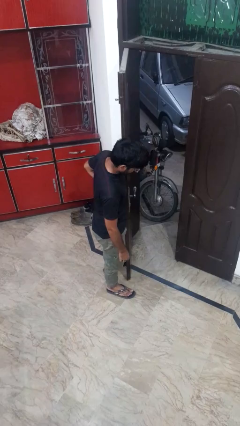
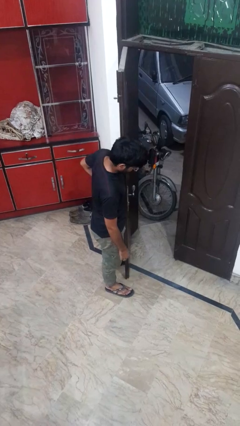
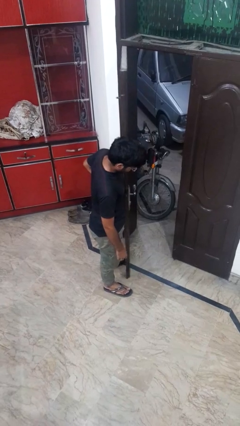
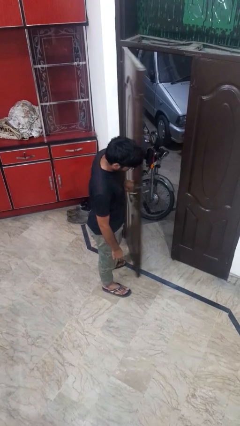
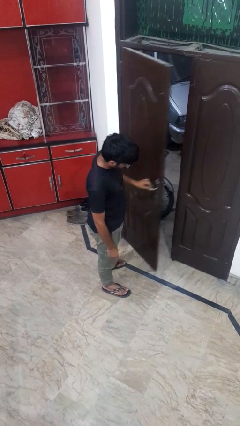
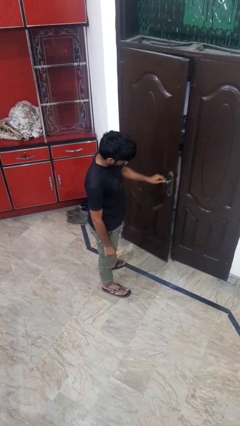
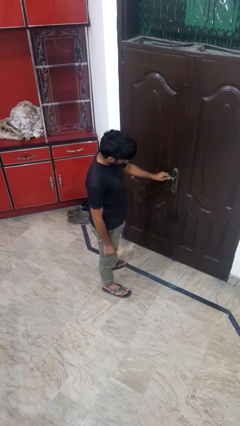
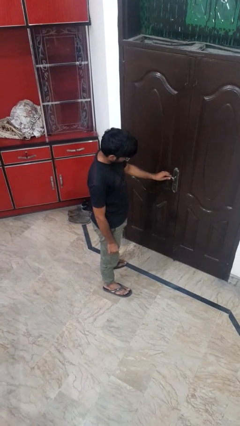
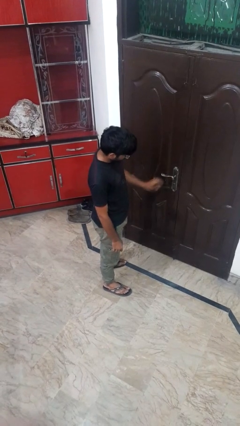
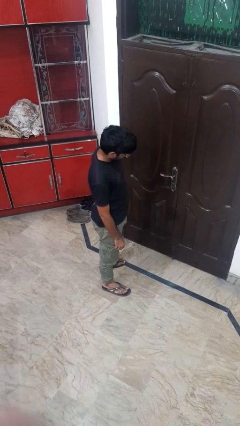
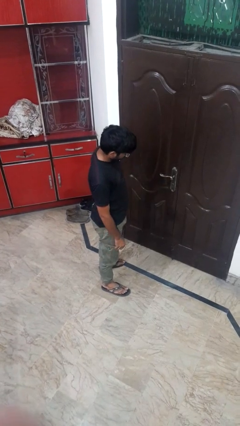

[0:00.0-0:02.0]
person closes facility door

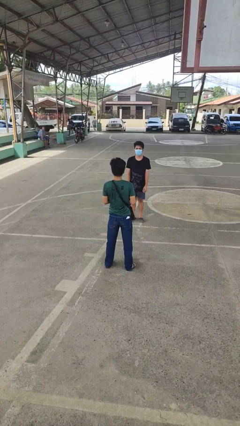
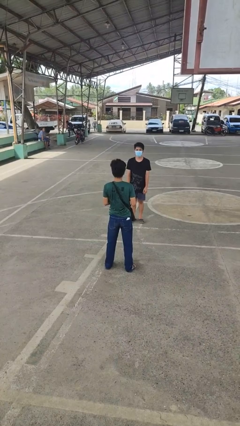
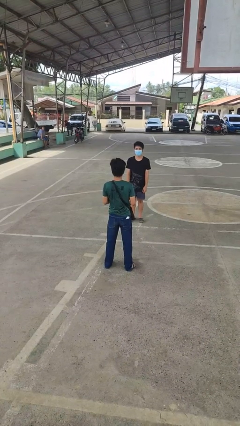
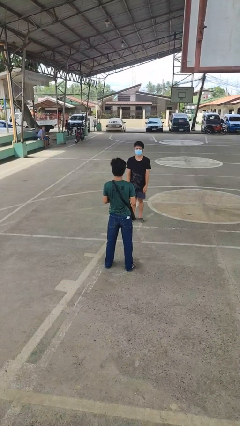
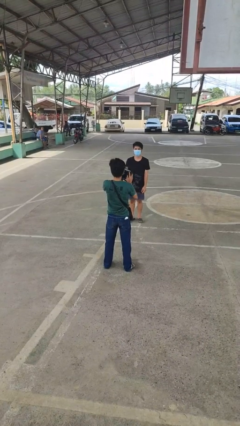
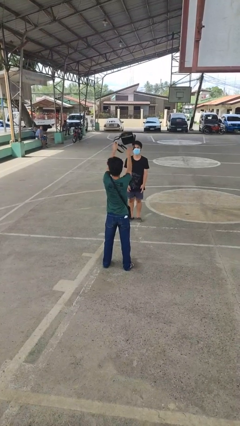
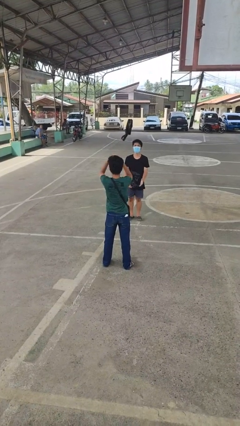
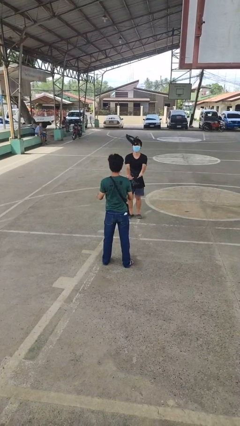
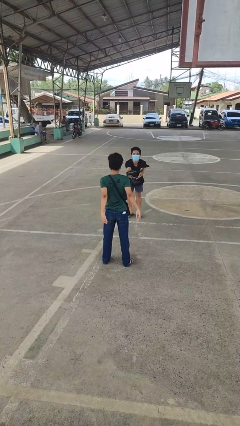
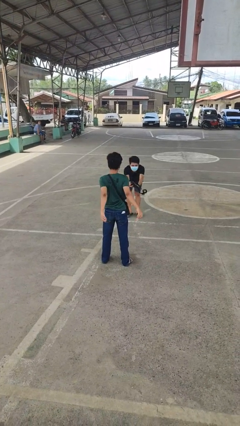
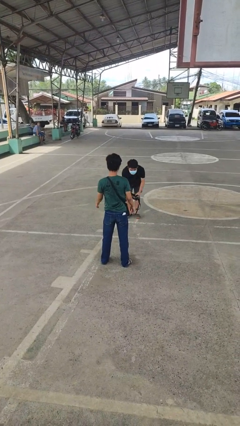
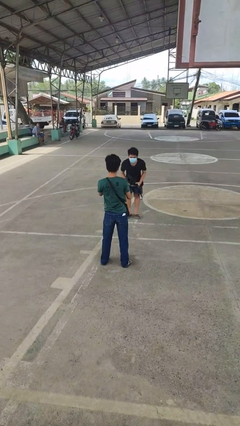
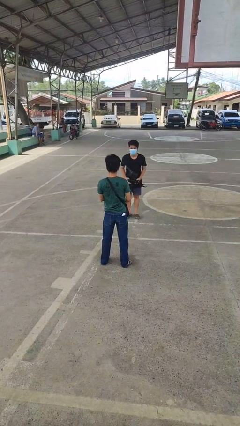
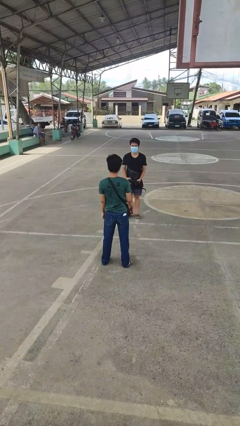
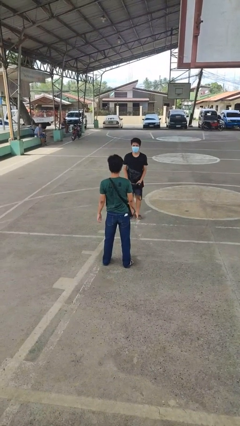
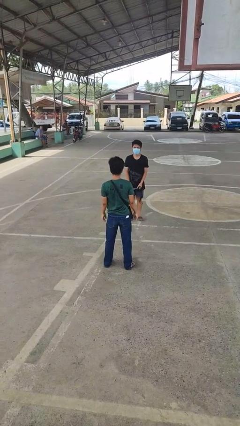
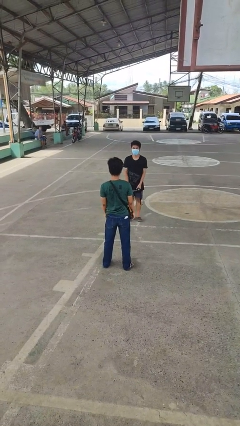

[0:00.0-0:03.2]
person throws object to person

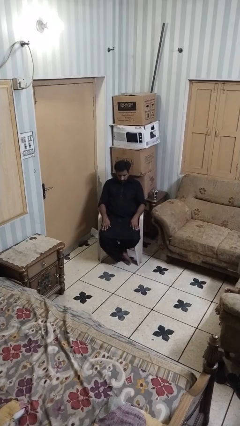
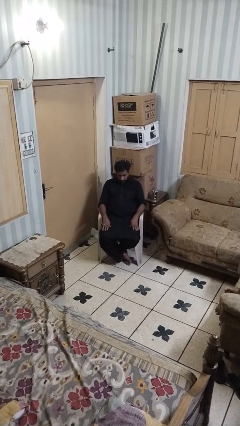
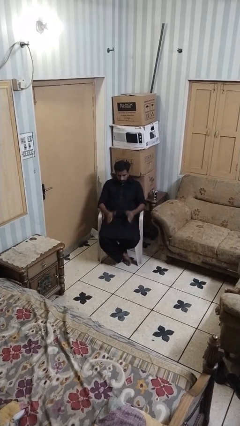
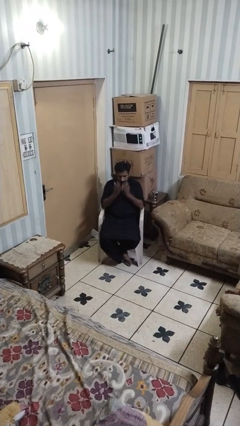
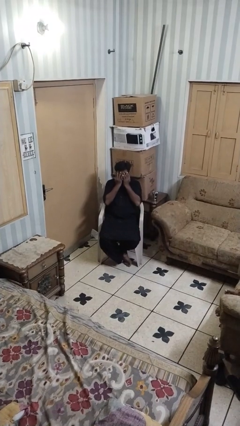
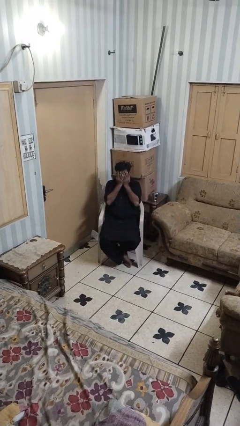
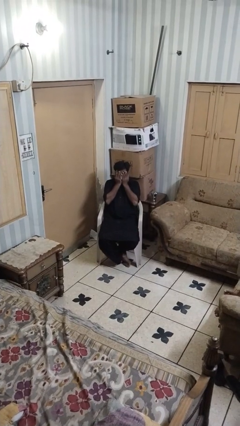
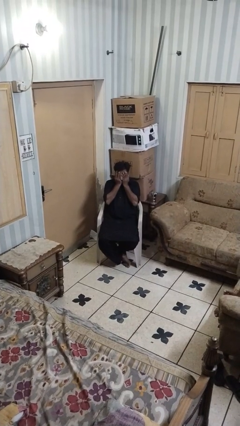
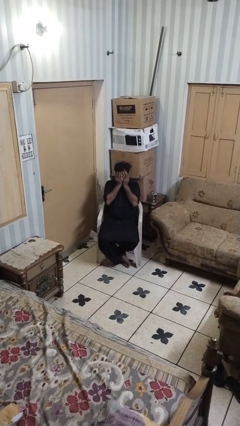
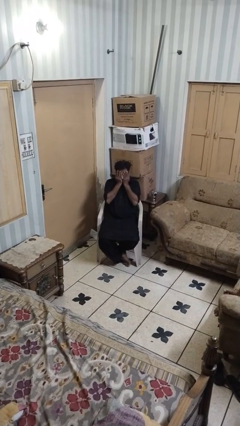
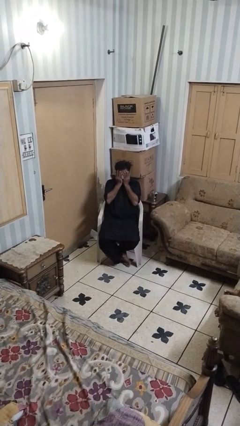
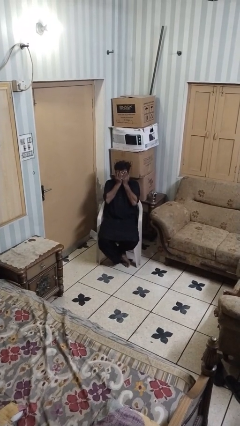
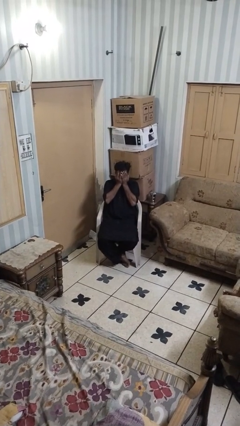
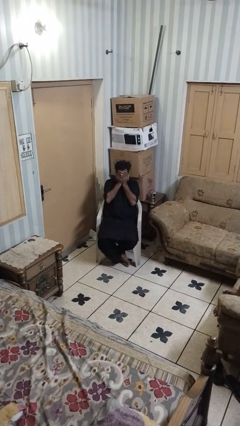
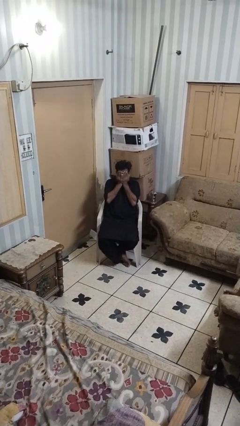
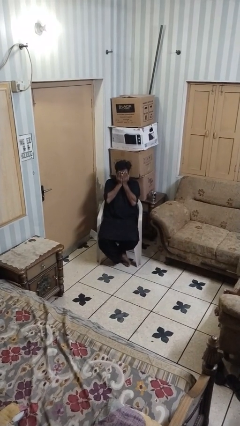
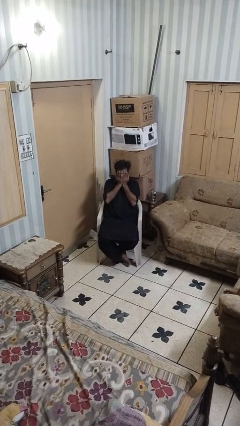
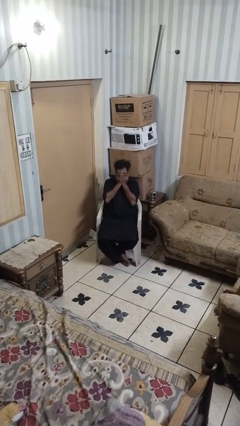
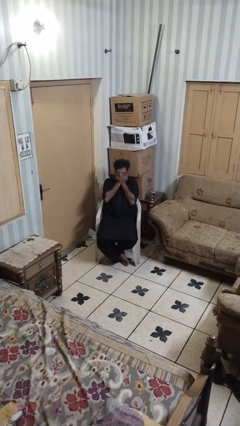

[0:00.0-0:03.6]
person covers face with hands

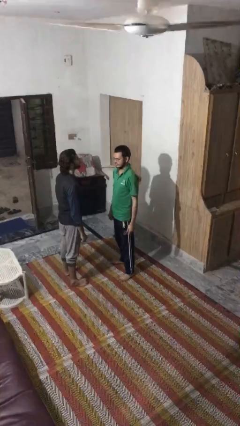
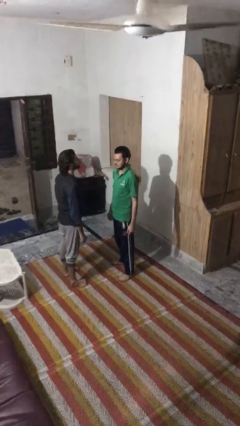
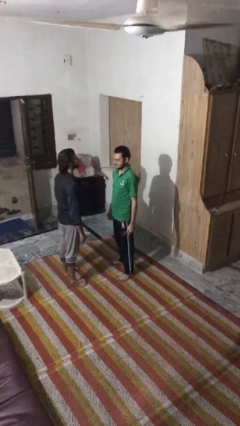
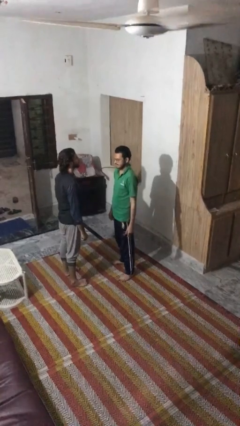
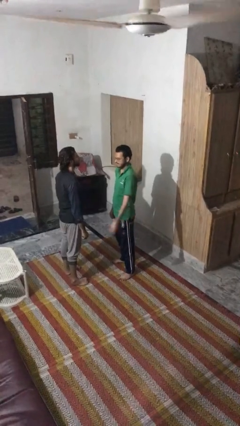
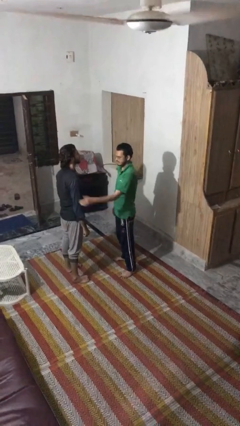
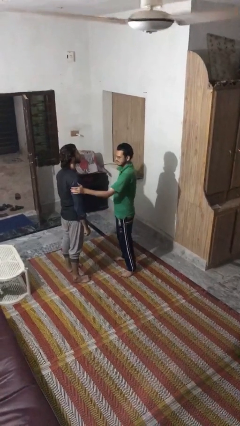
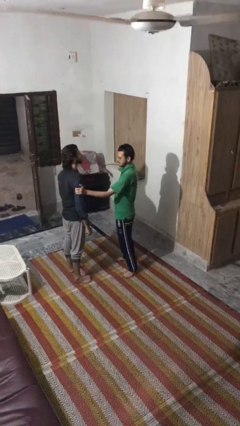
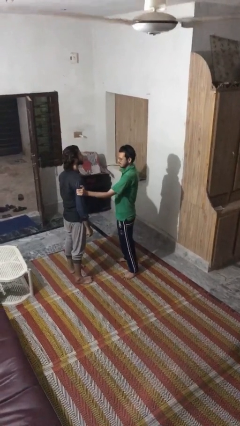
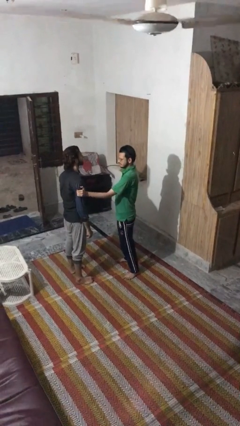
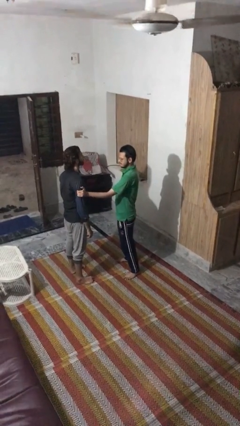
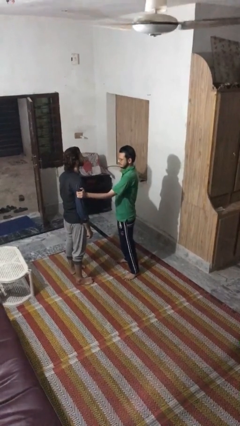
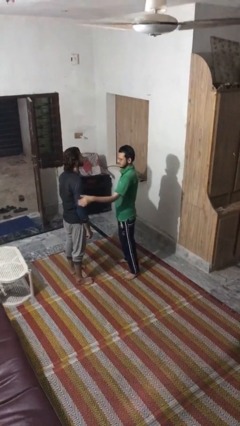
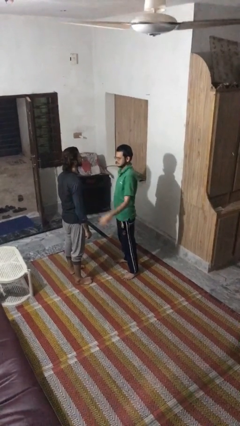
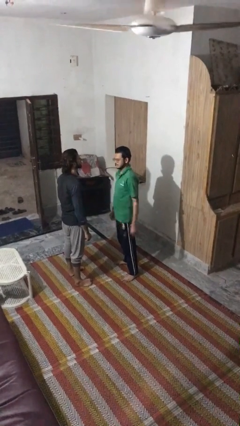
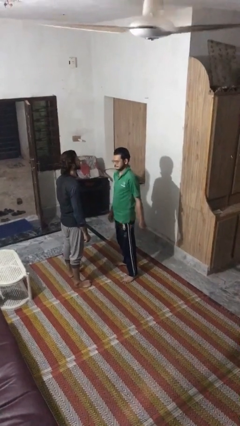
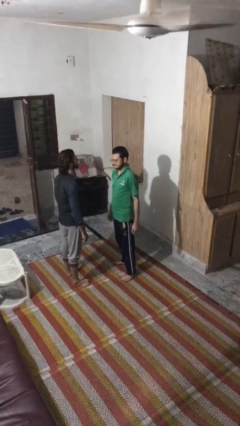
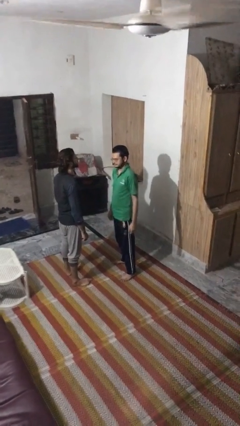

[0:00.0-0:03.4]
person grabs person by bicep

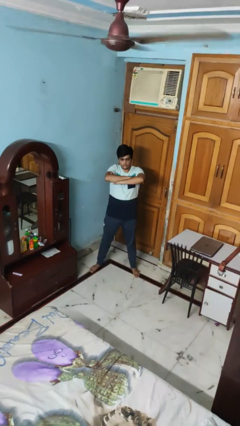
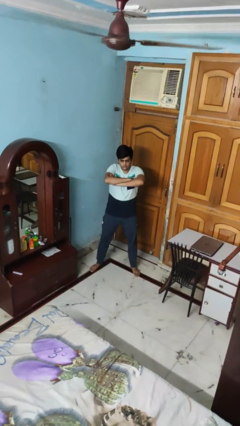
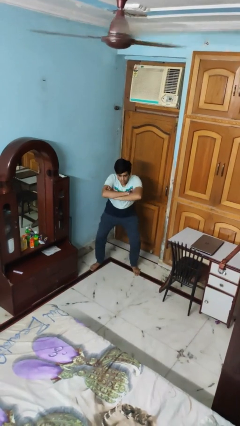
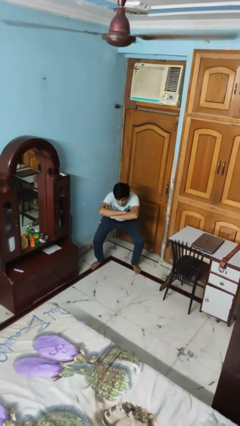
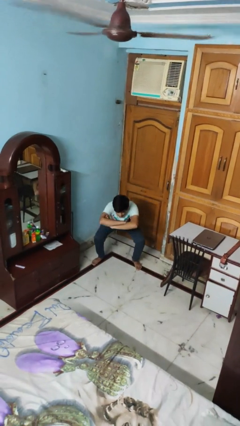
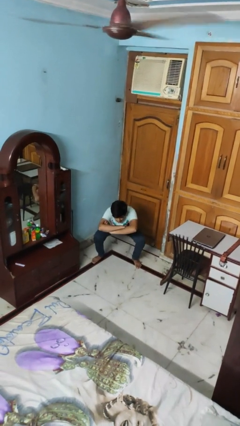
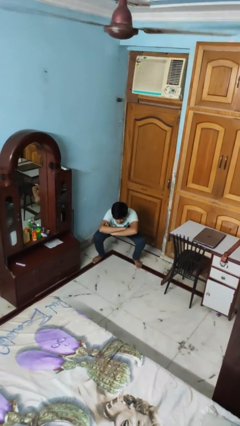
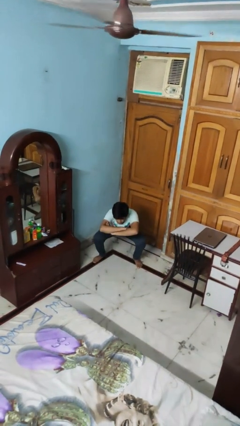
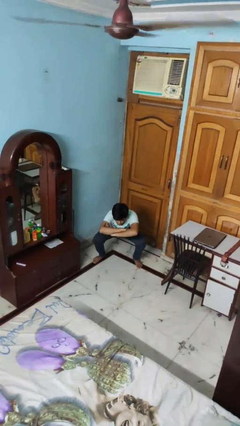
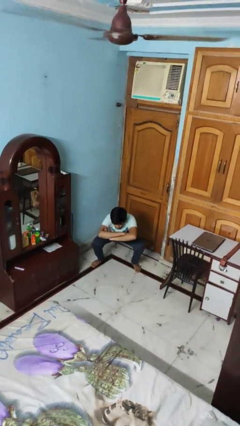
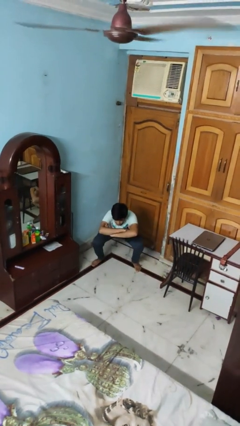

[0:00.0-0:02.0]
person squats

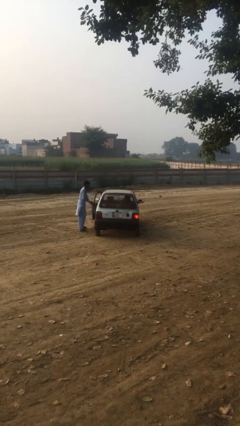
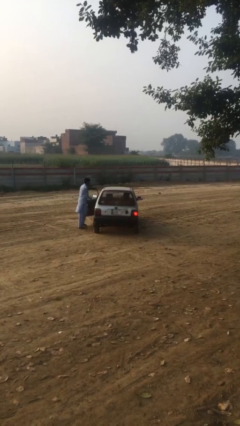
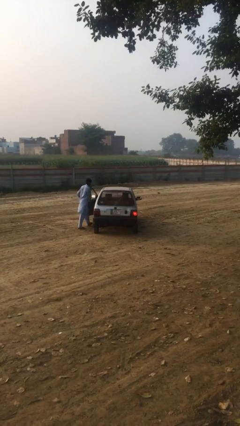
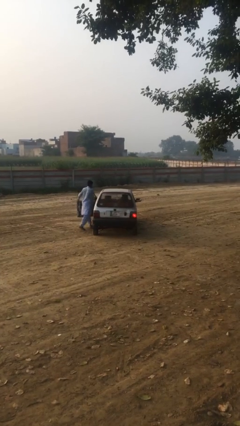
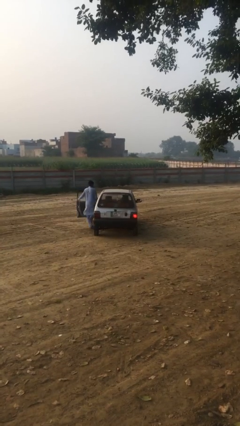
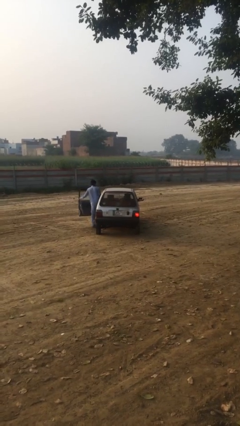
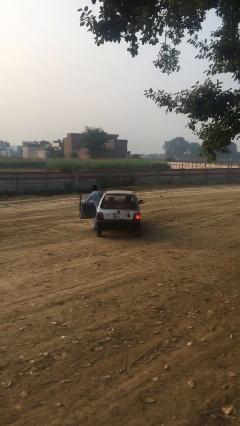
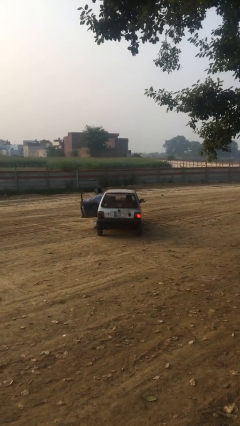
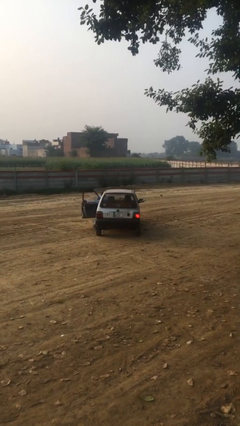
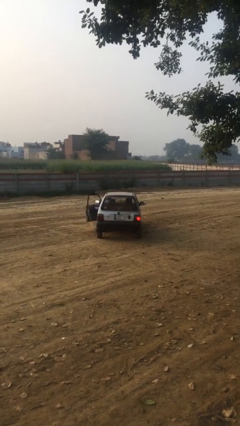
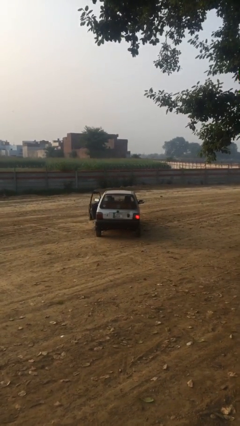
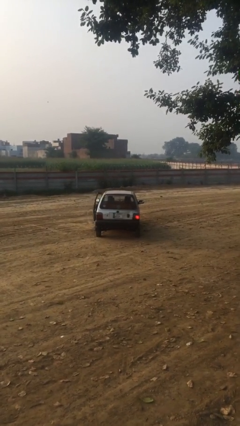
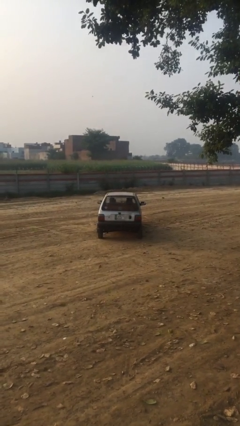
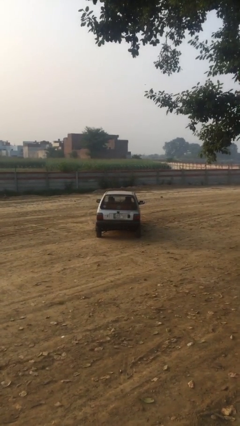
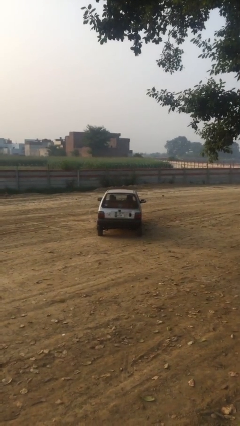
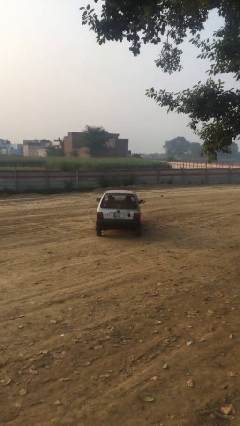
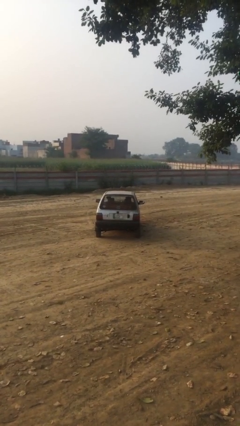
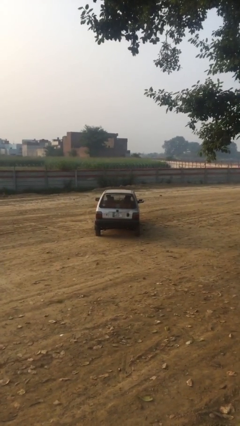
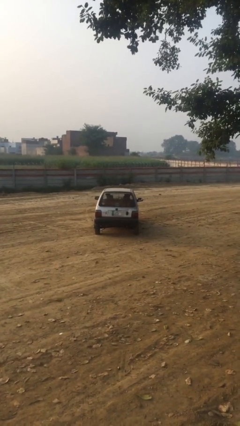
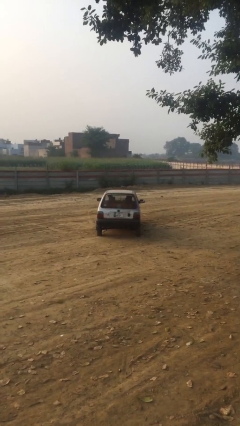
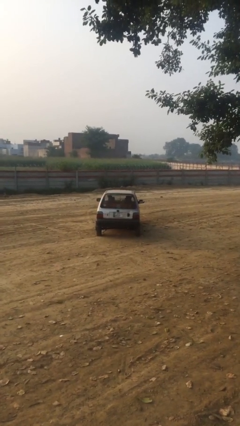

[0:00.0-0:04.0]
car picks up person
